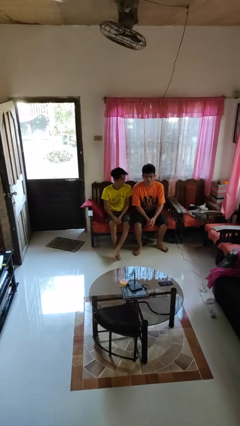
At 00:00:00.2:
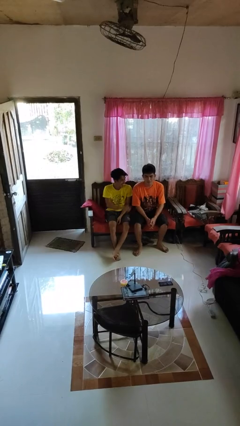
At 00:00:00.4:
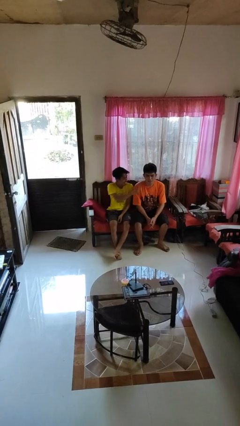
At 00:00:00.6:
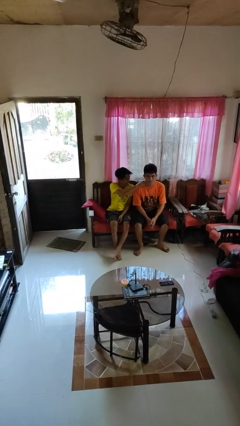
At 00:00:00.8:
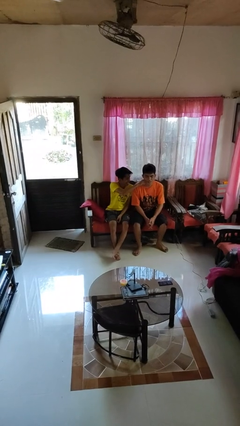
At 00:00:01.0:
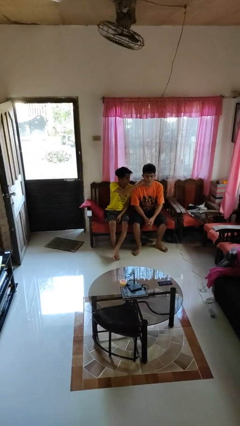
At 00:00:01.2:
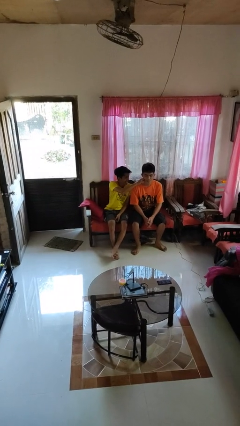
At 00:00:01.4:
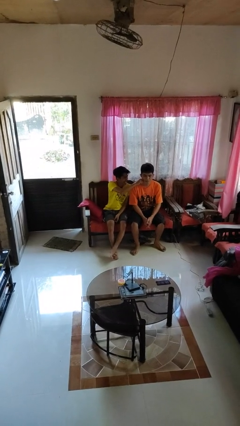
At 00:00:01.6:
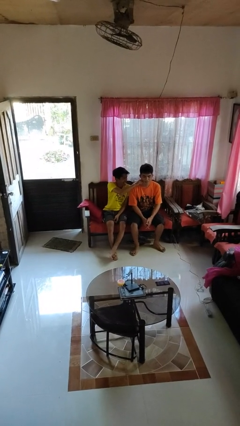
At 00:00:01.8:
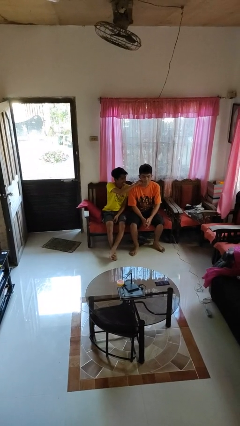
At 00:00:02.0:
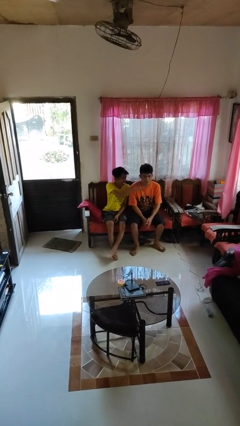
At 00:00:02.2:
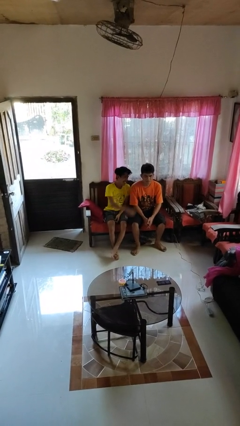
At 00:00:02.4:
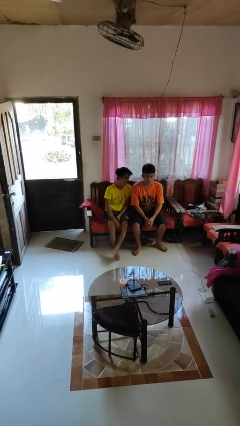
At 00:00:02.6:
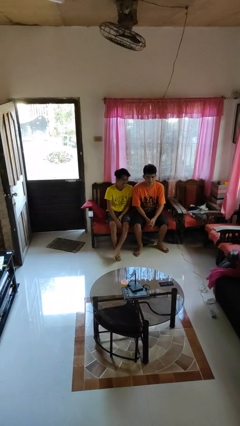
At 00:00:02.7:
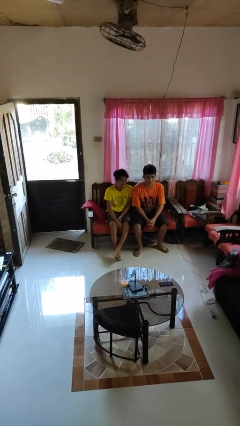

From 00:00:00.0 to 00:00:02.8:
person touches face of person

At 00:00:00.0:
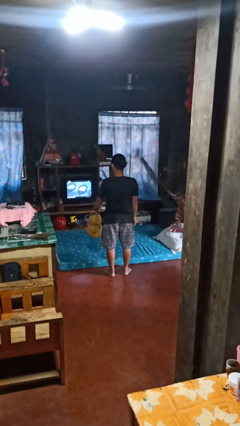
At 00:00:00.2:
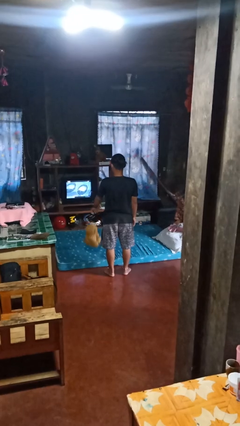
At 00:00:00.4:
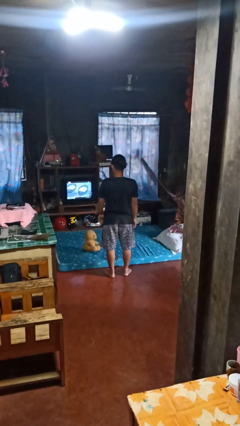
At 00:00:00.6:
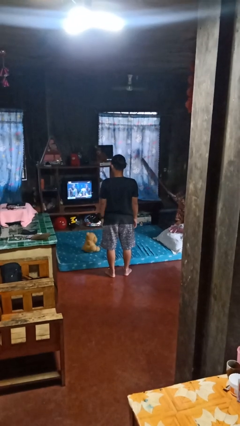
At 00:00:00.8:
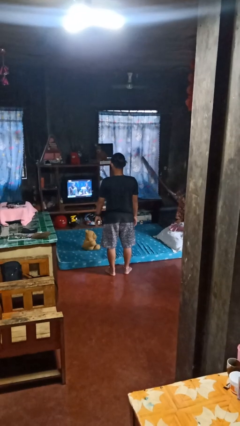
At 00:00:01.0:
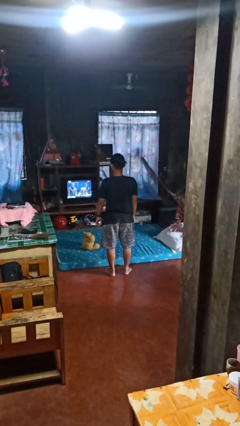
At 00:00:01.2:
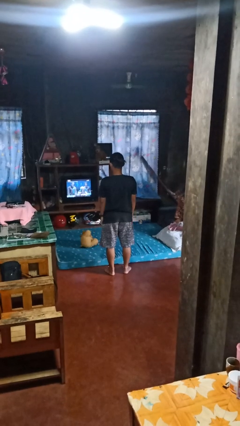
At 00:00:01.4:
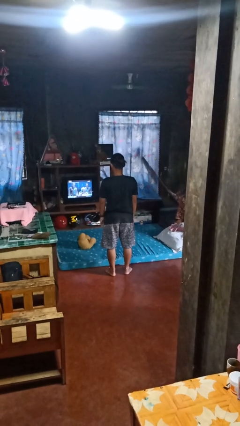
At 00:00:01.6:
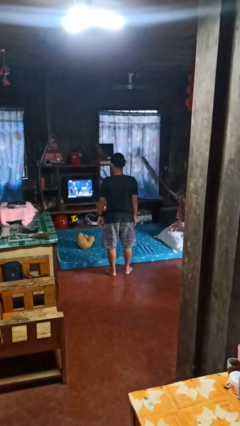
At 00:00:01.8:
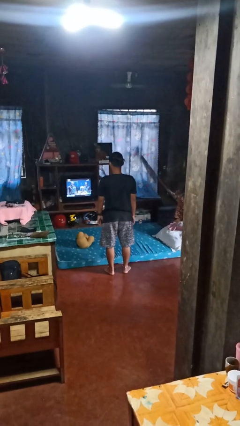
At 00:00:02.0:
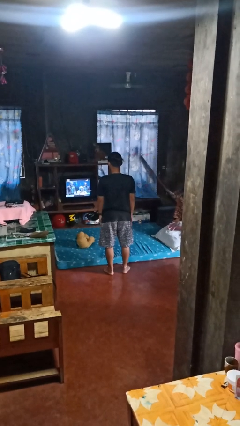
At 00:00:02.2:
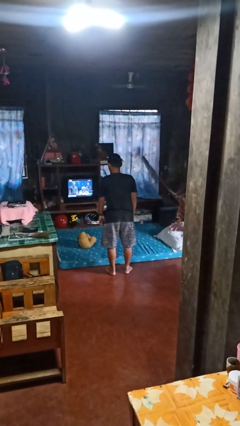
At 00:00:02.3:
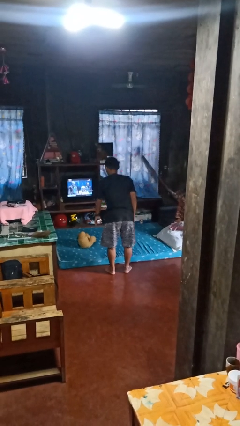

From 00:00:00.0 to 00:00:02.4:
person throws object on bed

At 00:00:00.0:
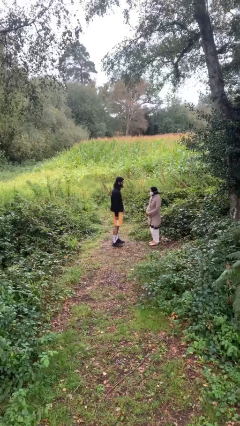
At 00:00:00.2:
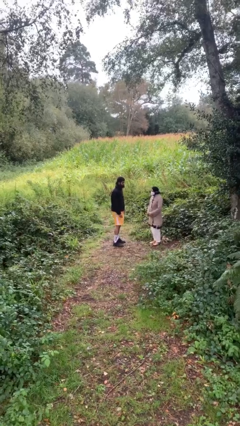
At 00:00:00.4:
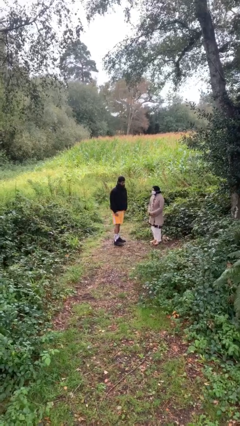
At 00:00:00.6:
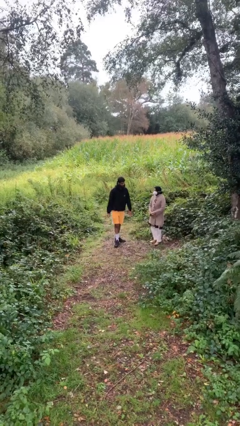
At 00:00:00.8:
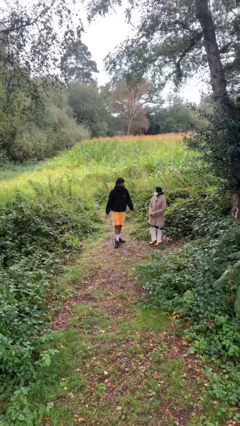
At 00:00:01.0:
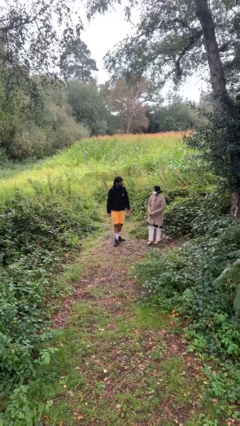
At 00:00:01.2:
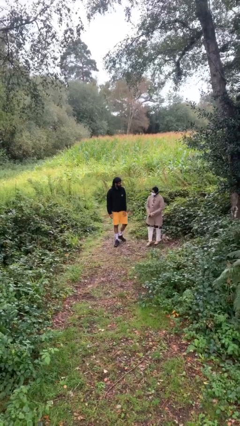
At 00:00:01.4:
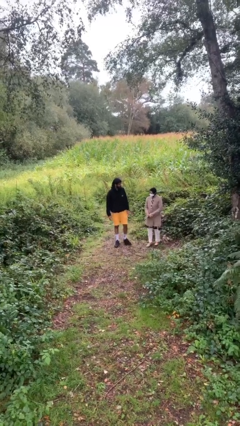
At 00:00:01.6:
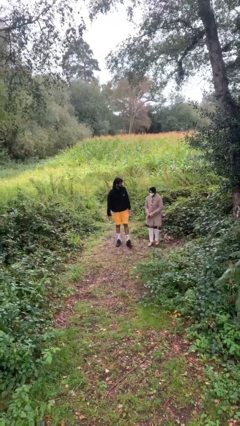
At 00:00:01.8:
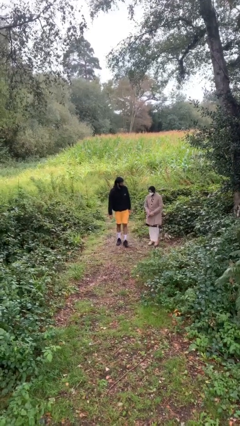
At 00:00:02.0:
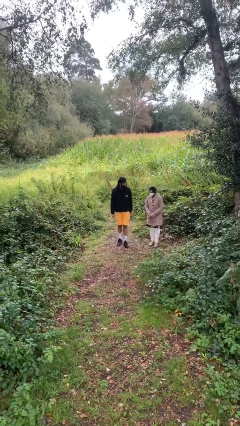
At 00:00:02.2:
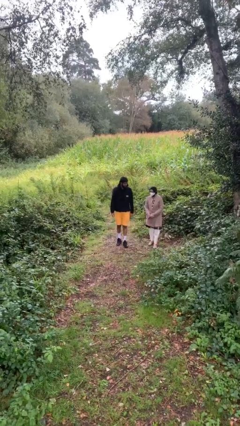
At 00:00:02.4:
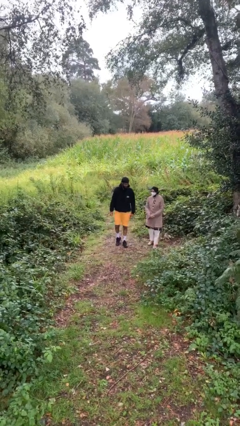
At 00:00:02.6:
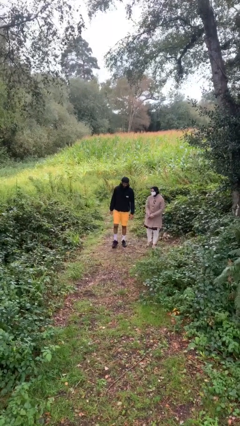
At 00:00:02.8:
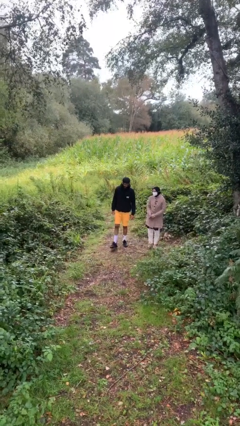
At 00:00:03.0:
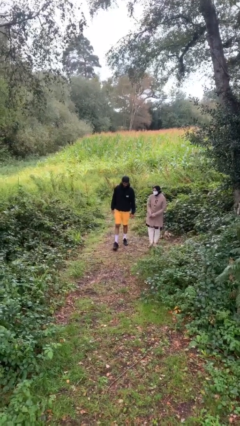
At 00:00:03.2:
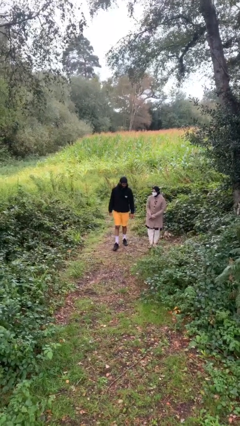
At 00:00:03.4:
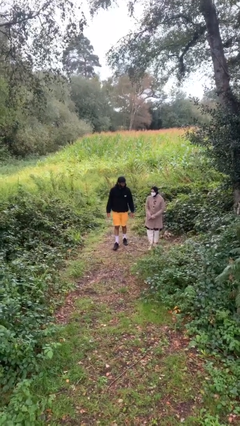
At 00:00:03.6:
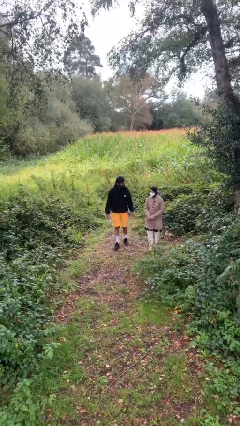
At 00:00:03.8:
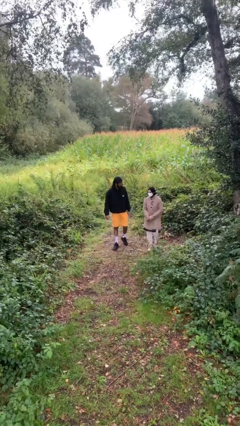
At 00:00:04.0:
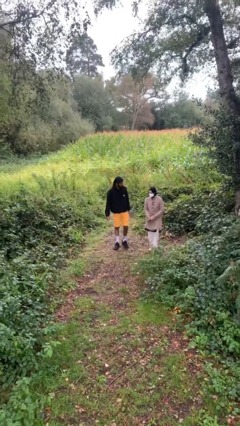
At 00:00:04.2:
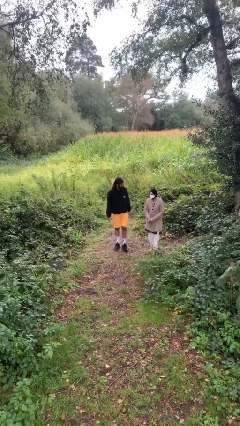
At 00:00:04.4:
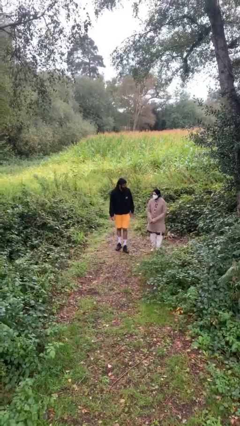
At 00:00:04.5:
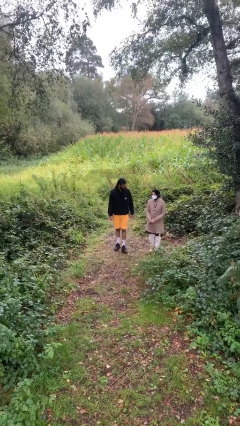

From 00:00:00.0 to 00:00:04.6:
person talks to person

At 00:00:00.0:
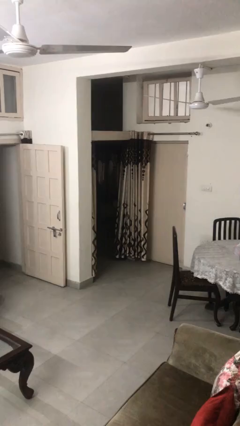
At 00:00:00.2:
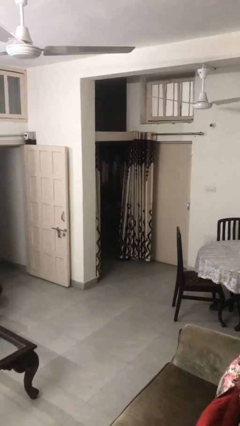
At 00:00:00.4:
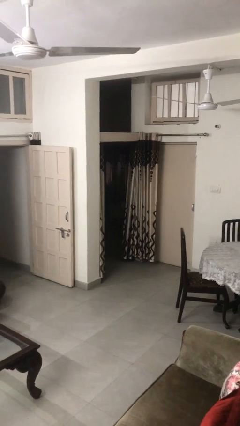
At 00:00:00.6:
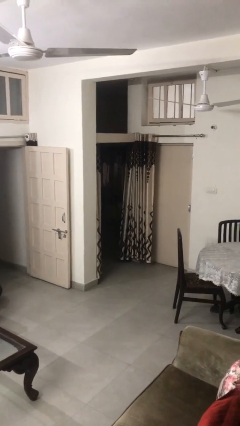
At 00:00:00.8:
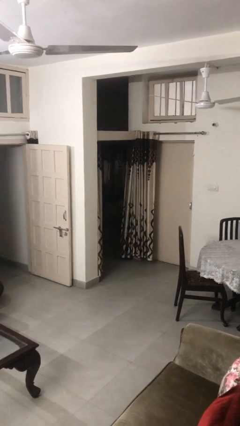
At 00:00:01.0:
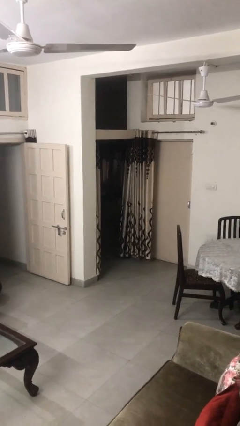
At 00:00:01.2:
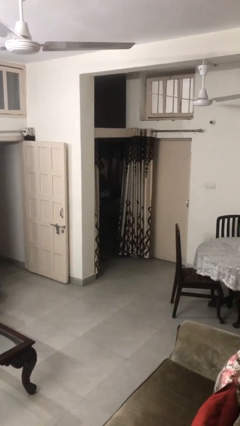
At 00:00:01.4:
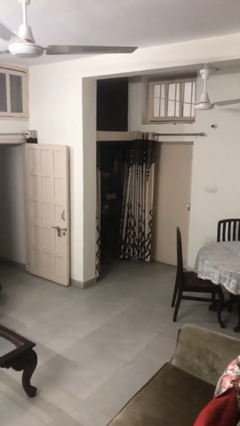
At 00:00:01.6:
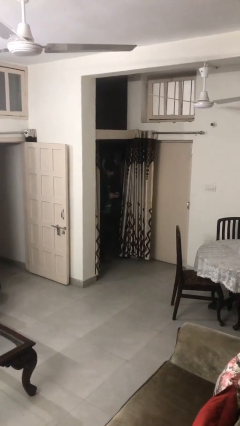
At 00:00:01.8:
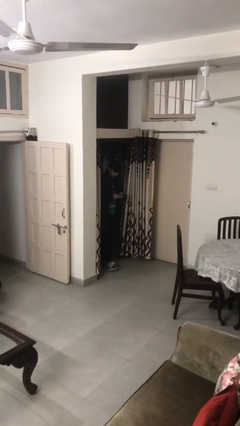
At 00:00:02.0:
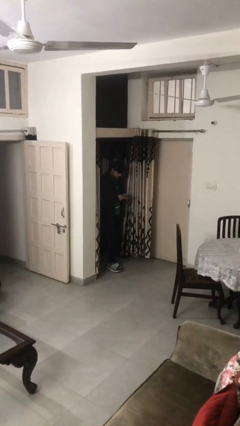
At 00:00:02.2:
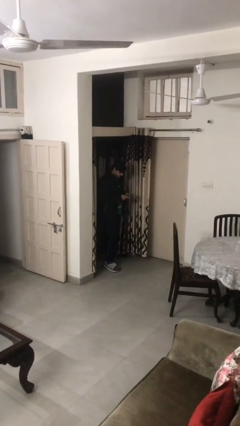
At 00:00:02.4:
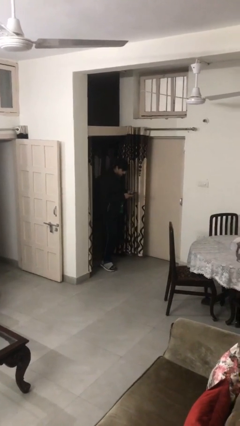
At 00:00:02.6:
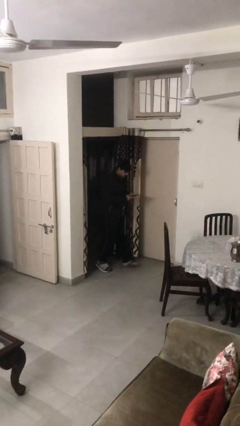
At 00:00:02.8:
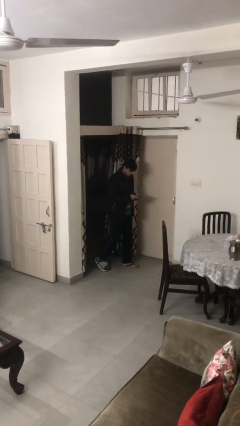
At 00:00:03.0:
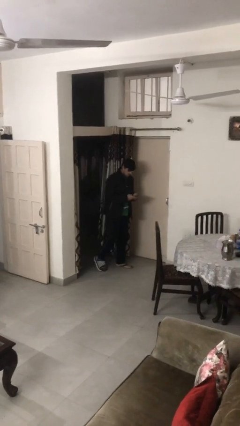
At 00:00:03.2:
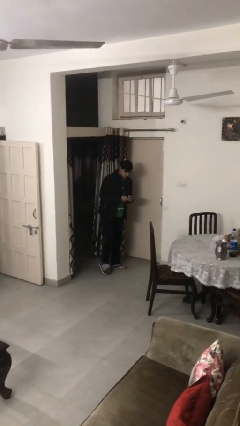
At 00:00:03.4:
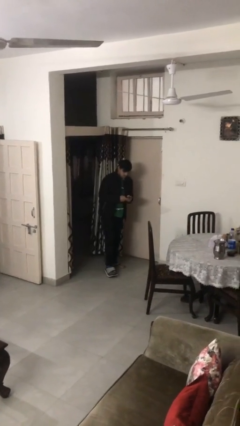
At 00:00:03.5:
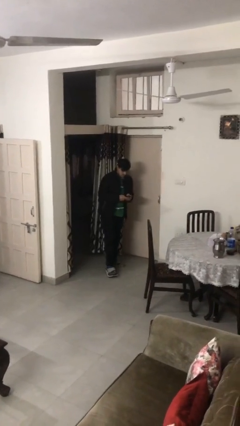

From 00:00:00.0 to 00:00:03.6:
person enters scene through structure

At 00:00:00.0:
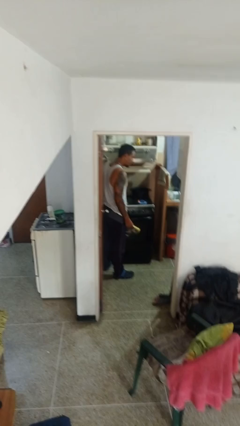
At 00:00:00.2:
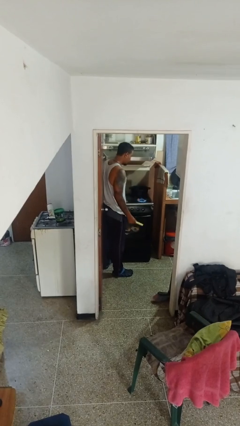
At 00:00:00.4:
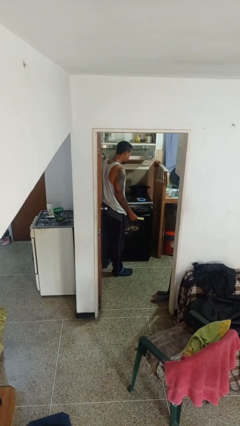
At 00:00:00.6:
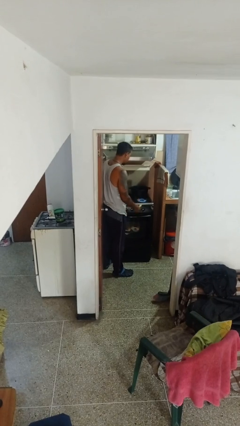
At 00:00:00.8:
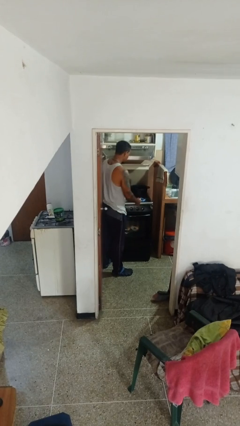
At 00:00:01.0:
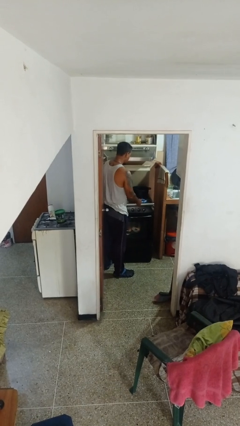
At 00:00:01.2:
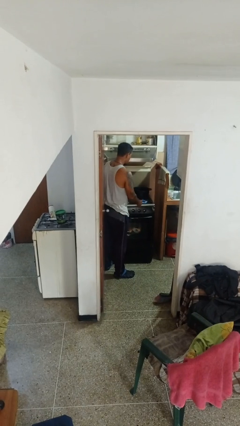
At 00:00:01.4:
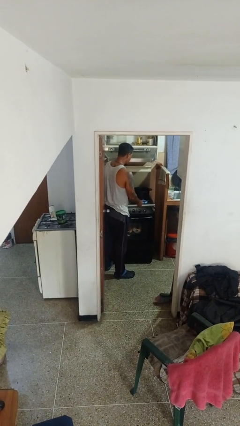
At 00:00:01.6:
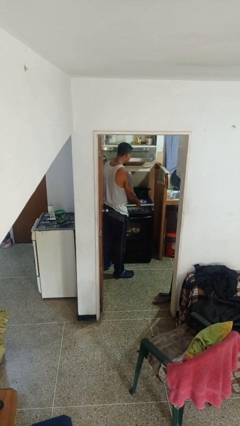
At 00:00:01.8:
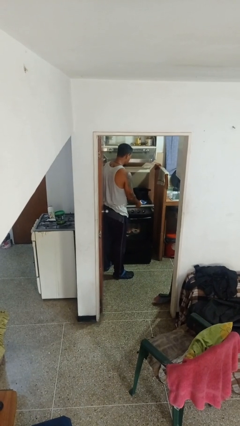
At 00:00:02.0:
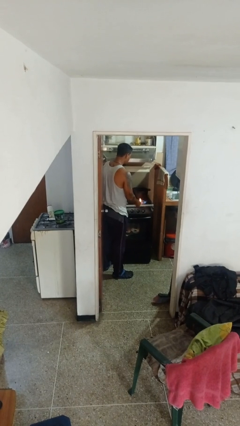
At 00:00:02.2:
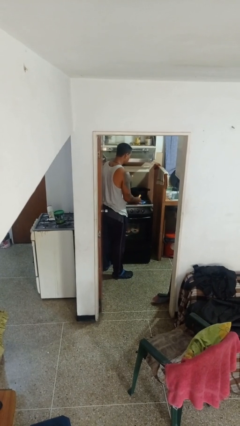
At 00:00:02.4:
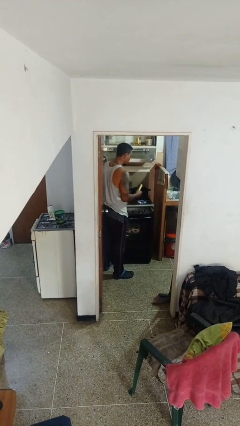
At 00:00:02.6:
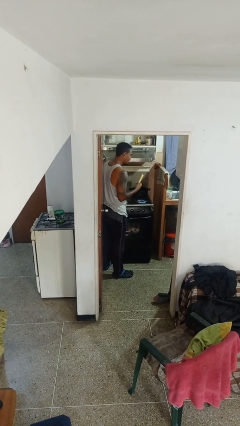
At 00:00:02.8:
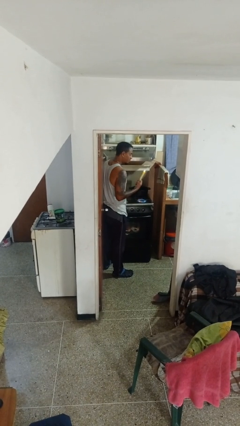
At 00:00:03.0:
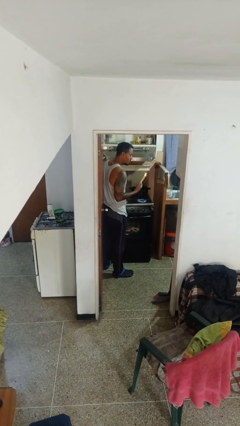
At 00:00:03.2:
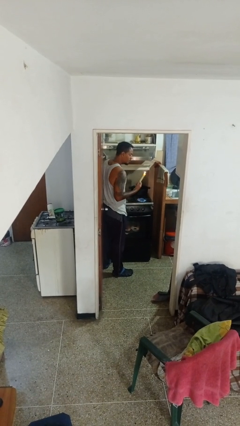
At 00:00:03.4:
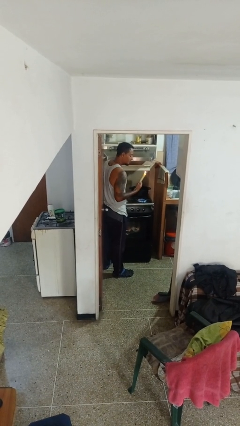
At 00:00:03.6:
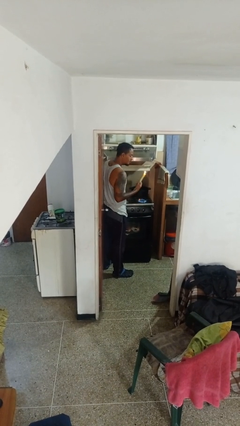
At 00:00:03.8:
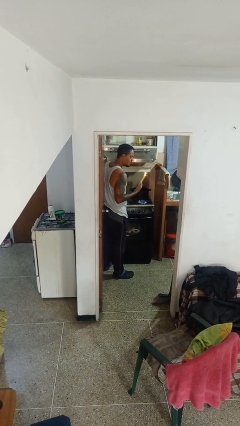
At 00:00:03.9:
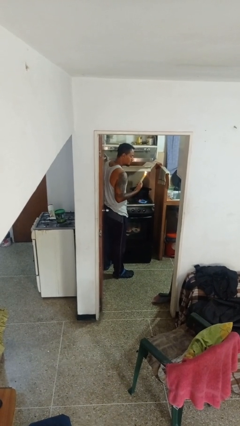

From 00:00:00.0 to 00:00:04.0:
person lights candle

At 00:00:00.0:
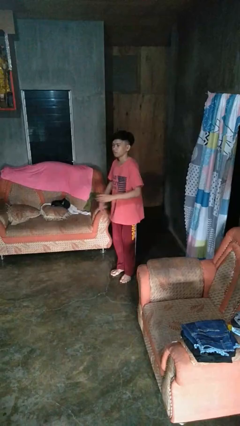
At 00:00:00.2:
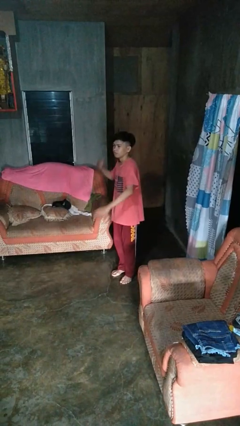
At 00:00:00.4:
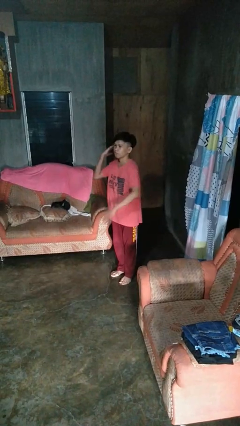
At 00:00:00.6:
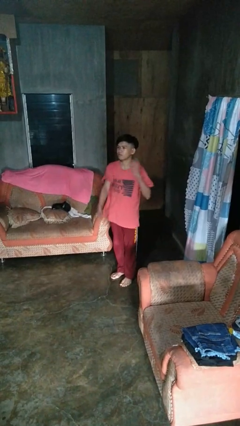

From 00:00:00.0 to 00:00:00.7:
person karate chop
